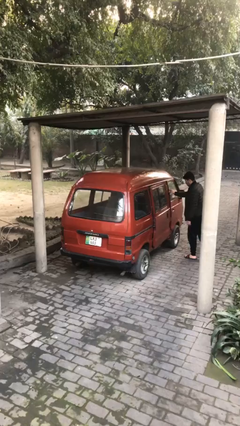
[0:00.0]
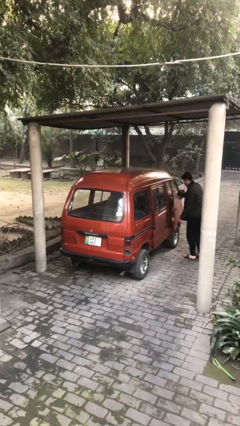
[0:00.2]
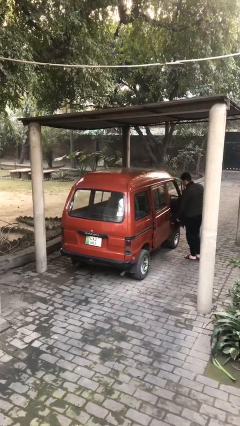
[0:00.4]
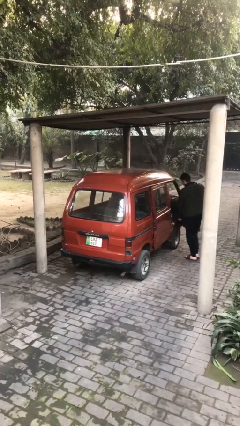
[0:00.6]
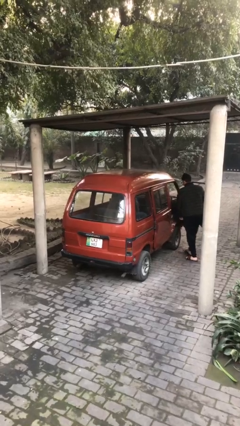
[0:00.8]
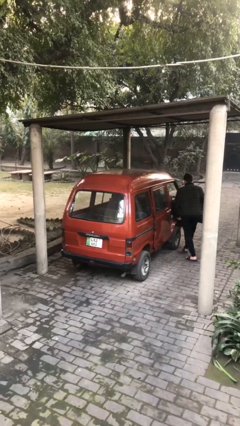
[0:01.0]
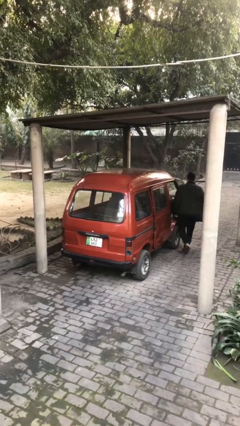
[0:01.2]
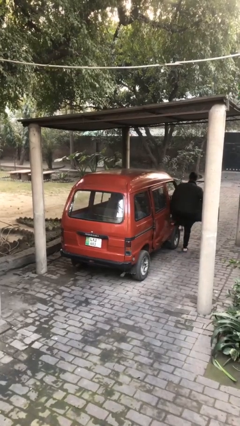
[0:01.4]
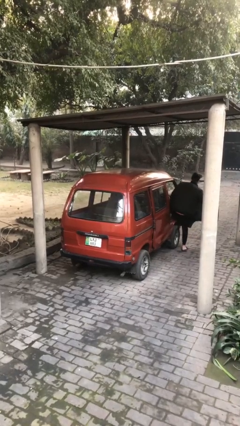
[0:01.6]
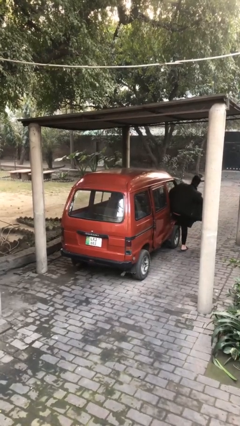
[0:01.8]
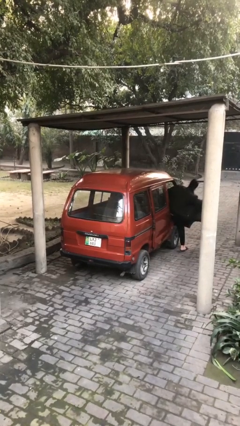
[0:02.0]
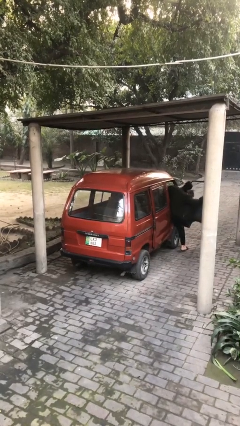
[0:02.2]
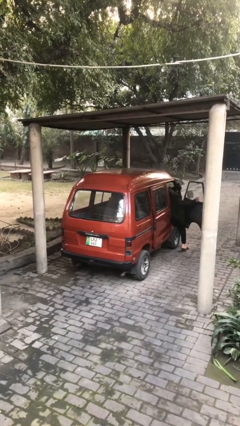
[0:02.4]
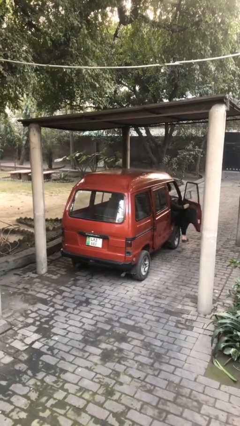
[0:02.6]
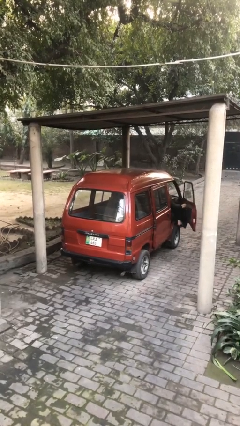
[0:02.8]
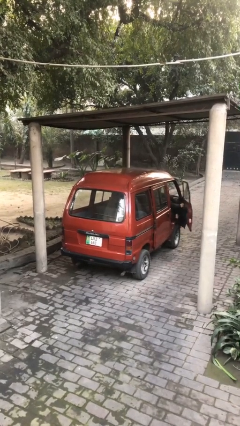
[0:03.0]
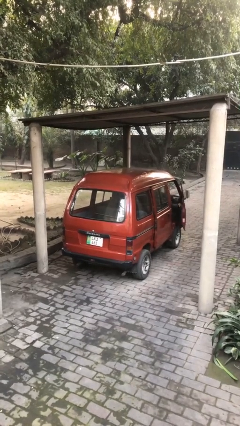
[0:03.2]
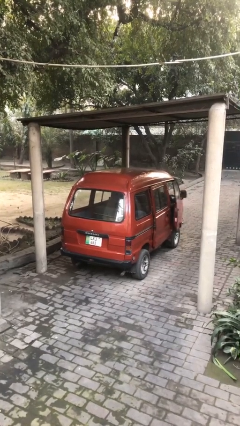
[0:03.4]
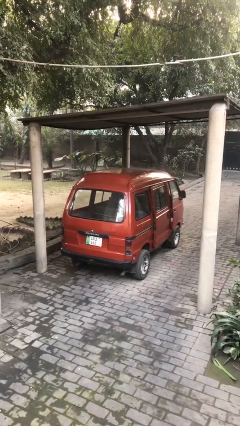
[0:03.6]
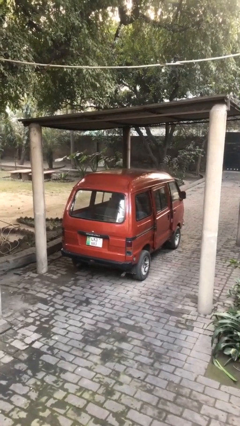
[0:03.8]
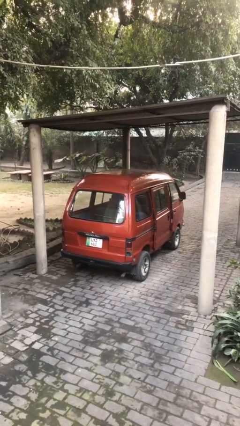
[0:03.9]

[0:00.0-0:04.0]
car picks up person

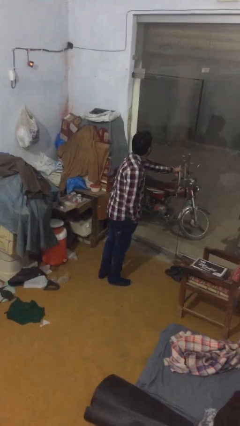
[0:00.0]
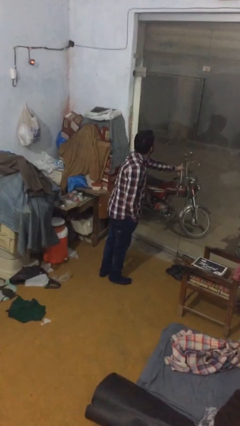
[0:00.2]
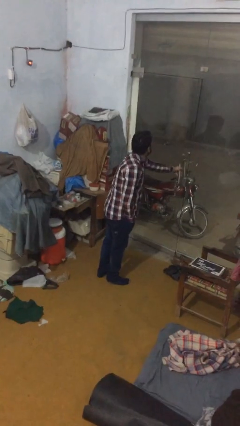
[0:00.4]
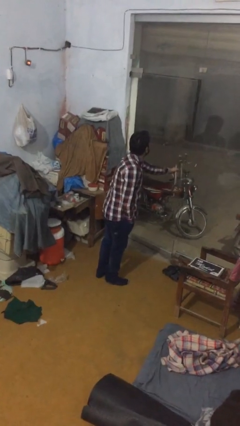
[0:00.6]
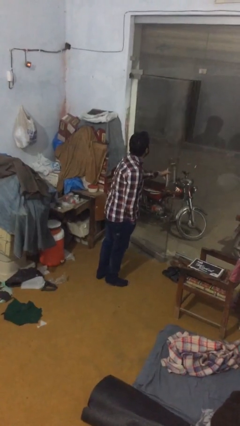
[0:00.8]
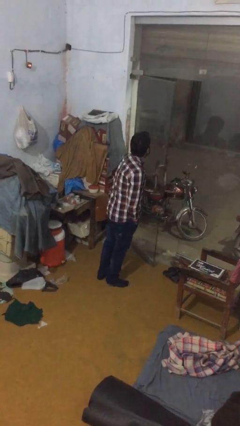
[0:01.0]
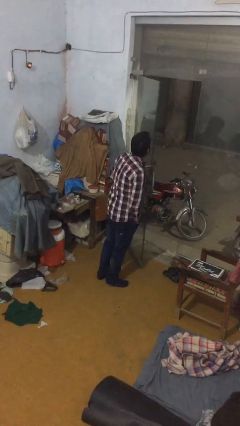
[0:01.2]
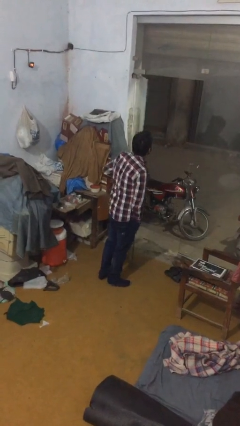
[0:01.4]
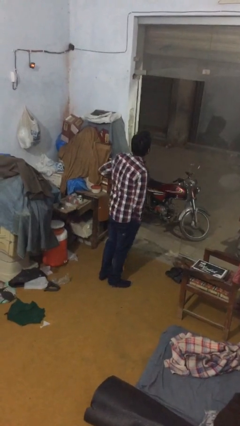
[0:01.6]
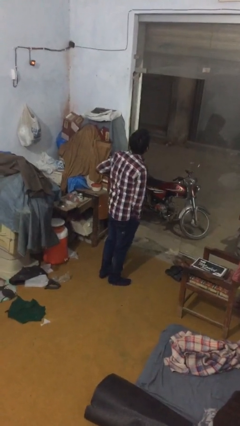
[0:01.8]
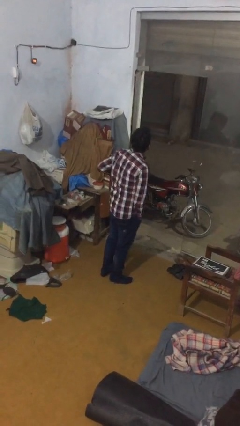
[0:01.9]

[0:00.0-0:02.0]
person closes facility door

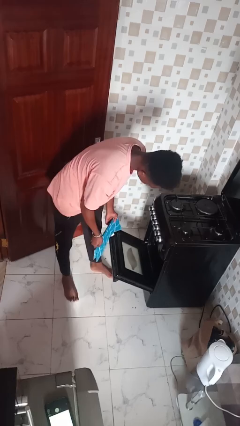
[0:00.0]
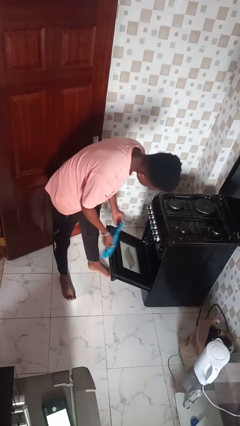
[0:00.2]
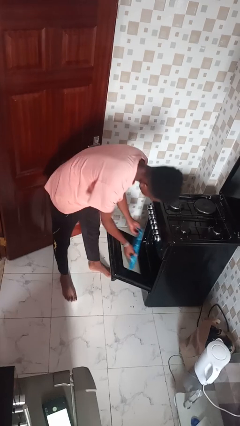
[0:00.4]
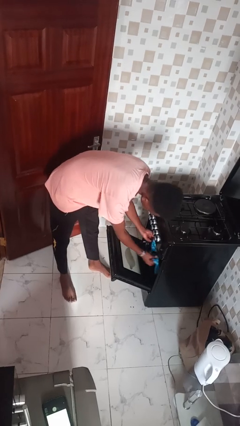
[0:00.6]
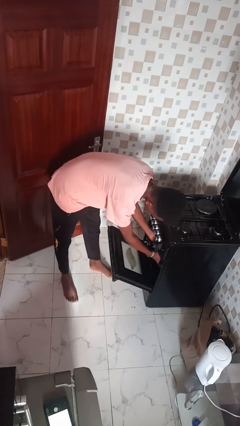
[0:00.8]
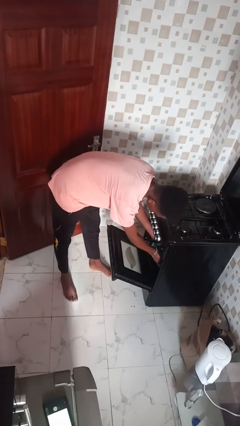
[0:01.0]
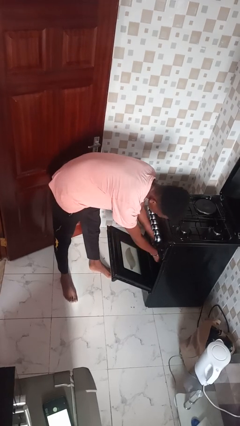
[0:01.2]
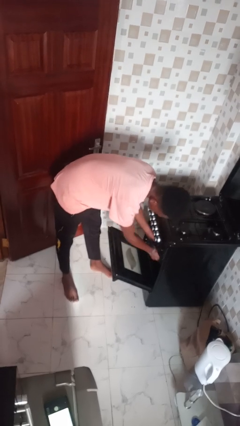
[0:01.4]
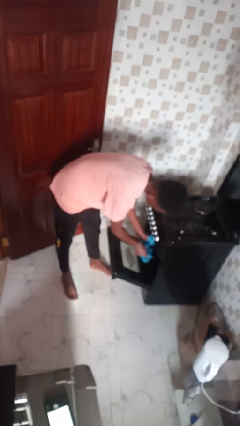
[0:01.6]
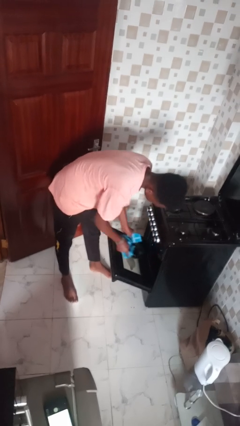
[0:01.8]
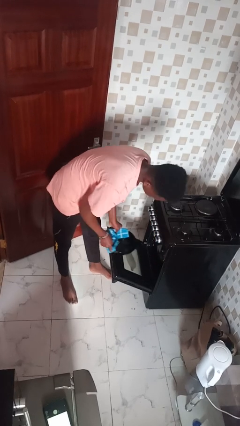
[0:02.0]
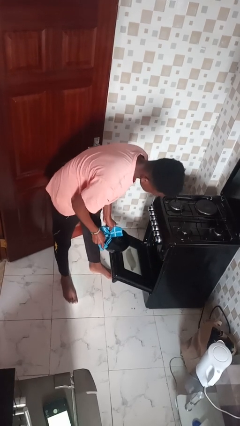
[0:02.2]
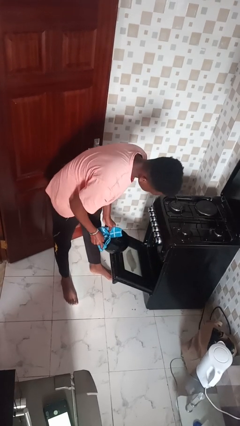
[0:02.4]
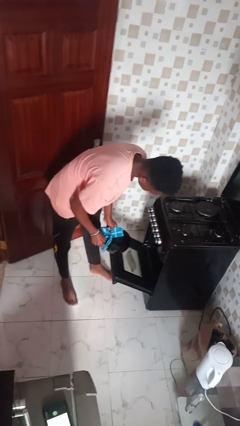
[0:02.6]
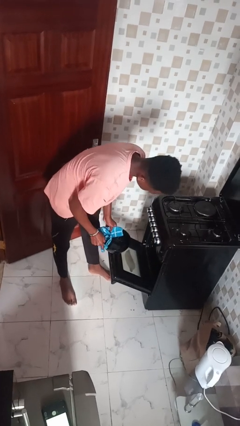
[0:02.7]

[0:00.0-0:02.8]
person takes object from oven

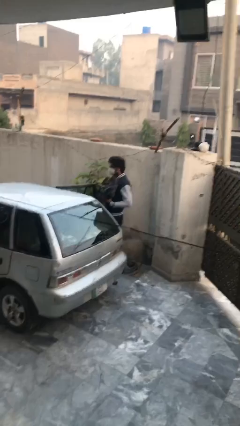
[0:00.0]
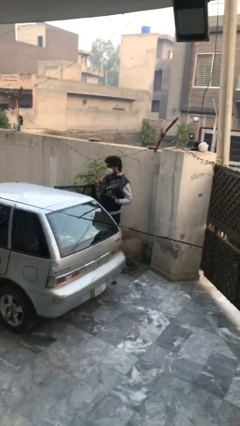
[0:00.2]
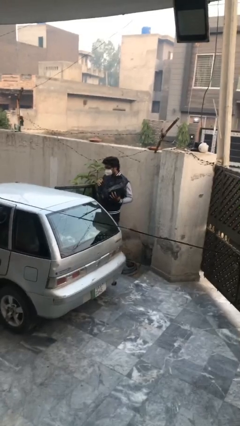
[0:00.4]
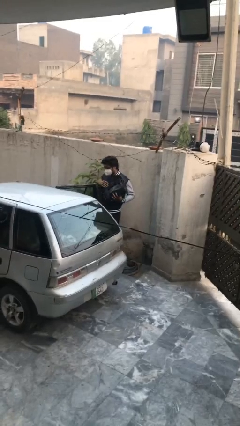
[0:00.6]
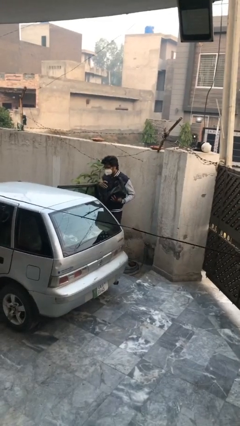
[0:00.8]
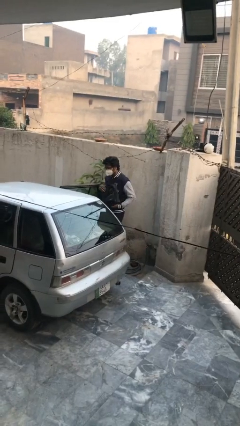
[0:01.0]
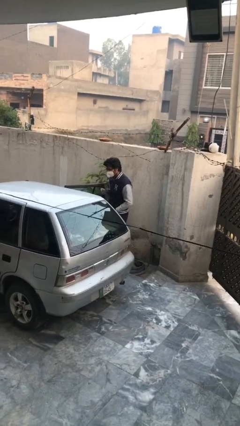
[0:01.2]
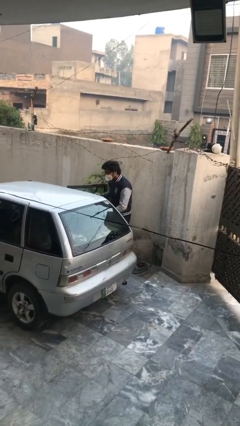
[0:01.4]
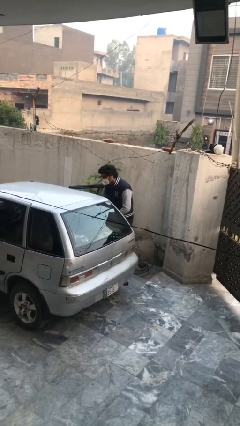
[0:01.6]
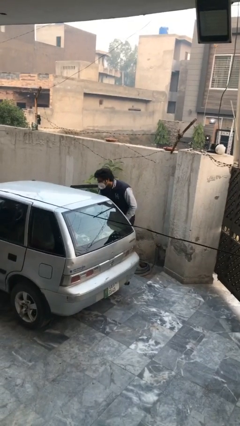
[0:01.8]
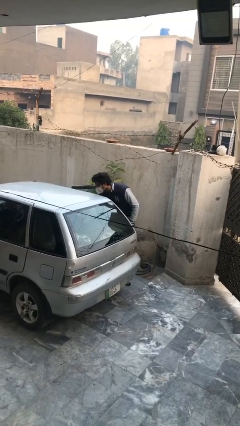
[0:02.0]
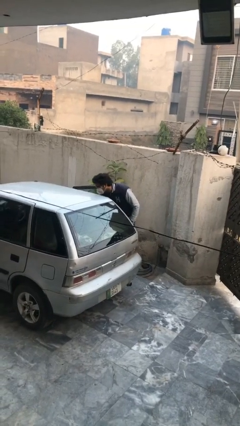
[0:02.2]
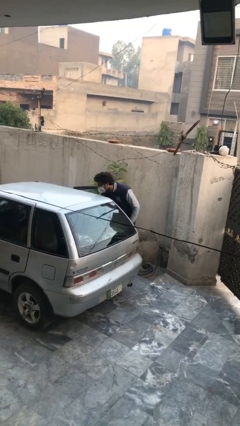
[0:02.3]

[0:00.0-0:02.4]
person loads car

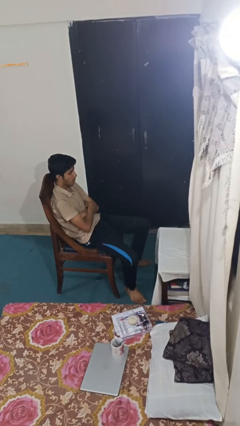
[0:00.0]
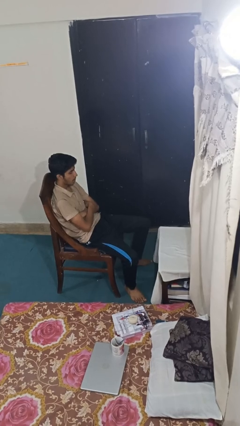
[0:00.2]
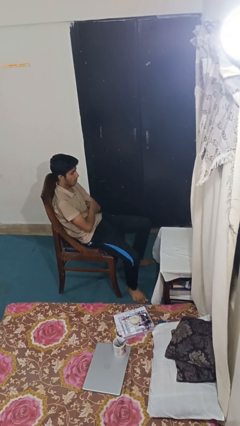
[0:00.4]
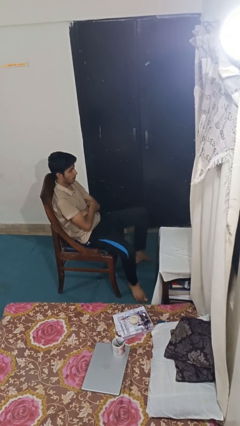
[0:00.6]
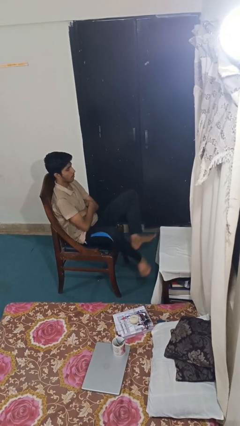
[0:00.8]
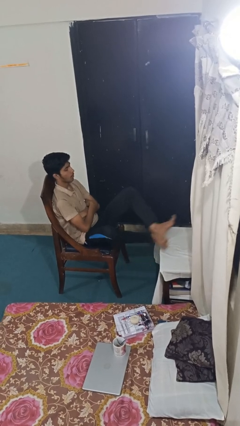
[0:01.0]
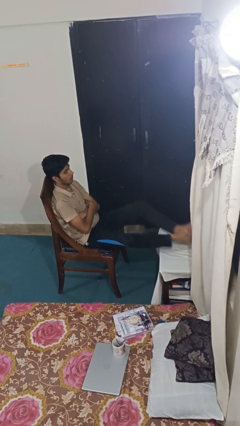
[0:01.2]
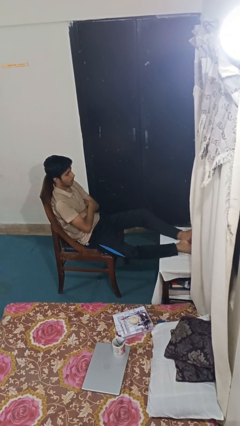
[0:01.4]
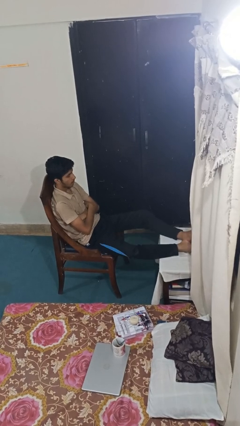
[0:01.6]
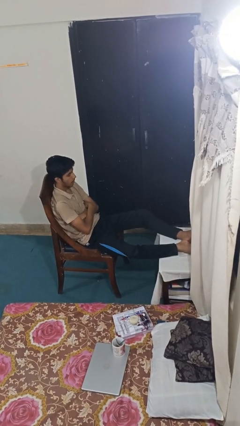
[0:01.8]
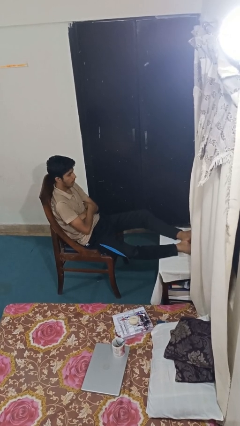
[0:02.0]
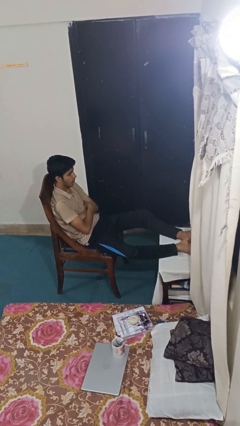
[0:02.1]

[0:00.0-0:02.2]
person puts feet up

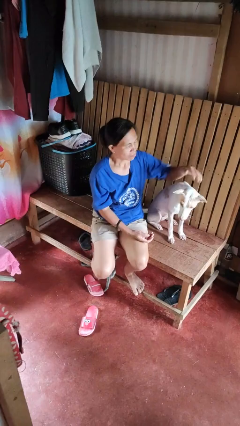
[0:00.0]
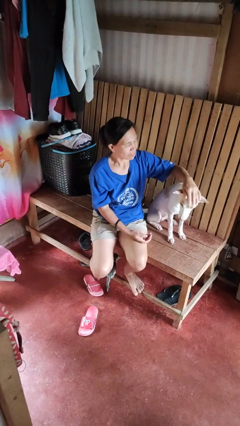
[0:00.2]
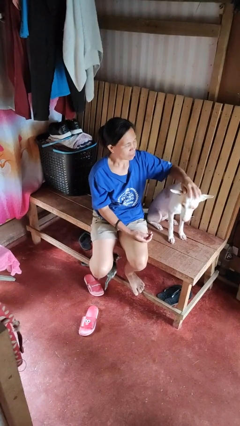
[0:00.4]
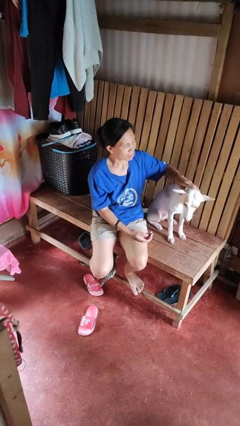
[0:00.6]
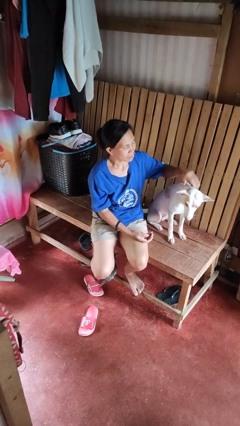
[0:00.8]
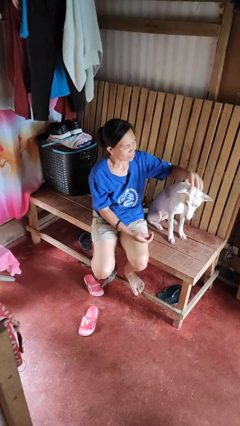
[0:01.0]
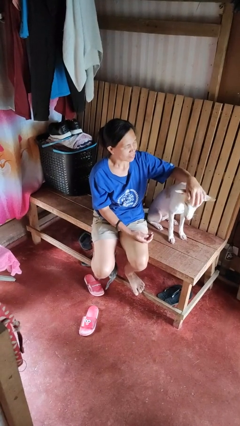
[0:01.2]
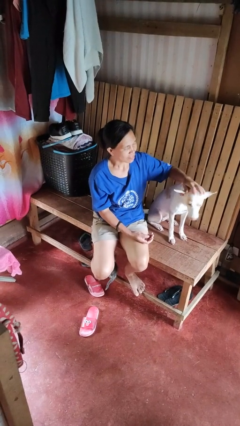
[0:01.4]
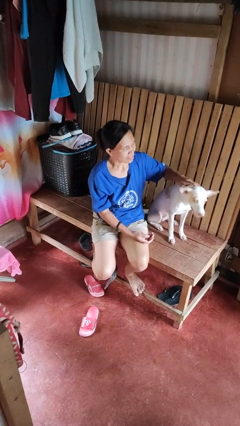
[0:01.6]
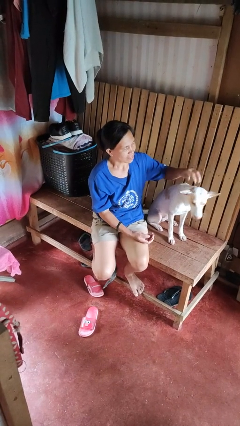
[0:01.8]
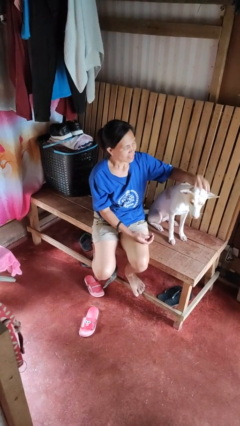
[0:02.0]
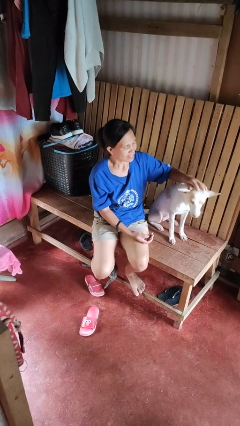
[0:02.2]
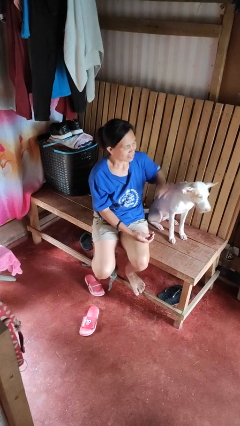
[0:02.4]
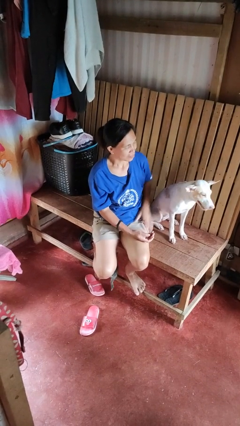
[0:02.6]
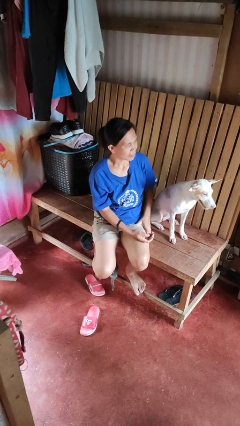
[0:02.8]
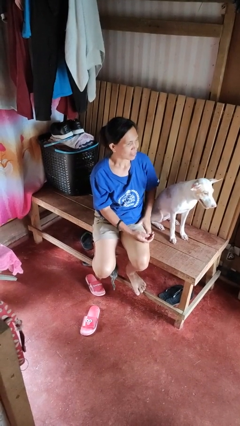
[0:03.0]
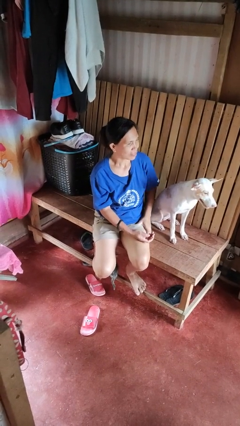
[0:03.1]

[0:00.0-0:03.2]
person pets dog

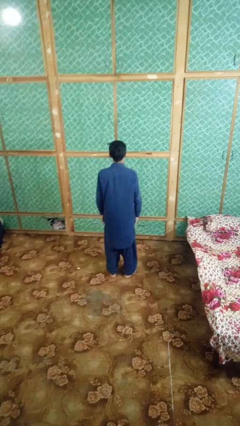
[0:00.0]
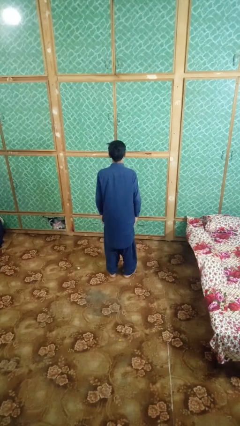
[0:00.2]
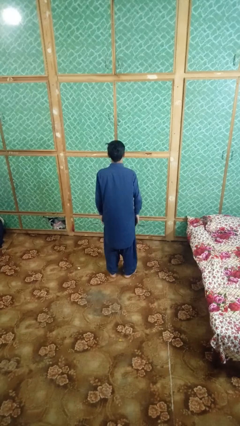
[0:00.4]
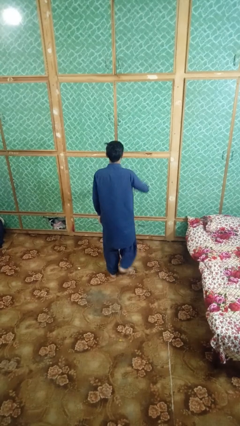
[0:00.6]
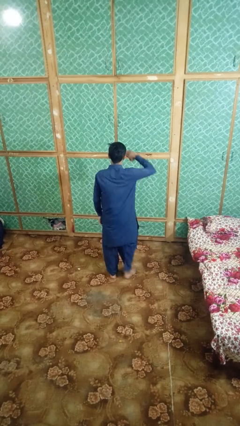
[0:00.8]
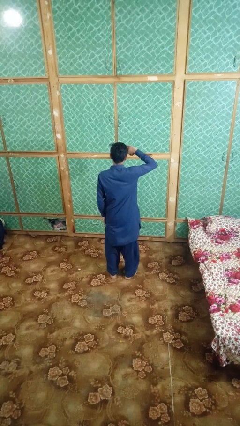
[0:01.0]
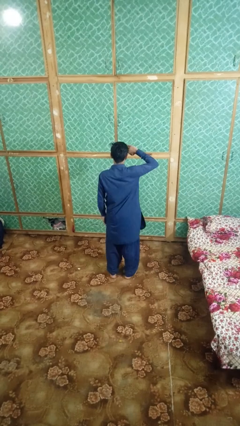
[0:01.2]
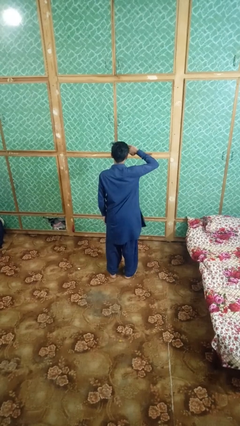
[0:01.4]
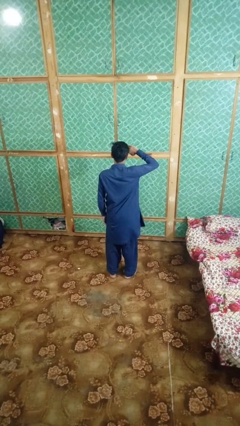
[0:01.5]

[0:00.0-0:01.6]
person salutes
